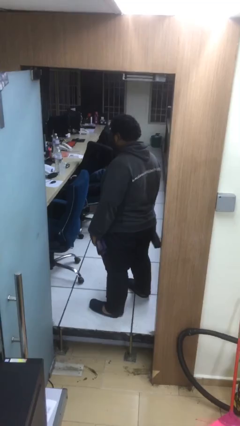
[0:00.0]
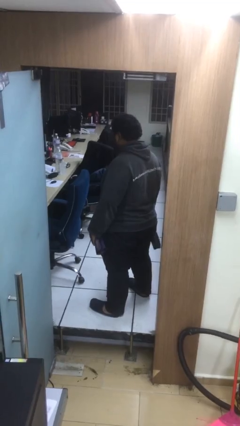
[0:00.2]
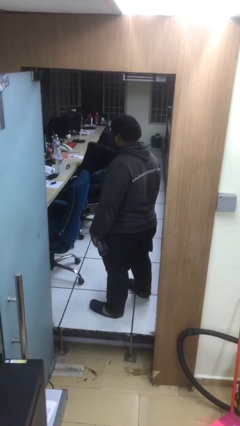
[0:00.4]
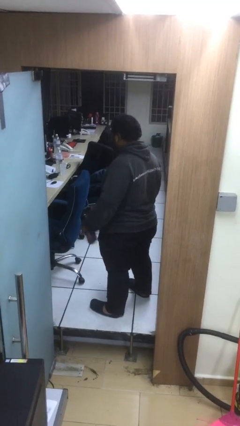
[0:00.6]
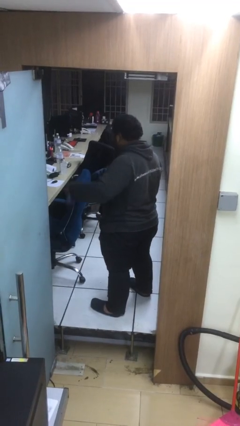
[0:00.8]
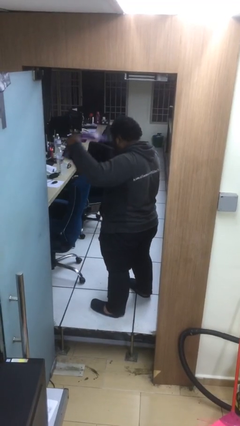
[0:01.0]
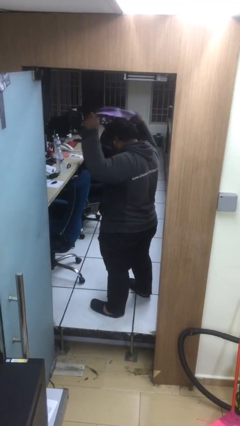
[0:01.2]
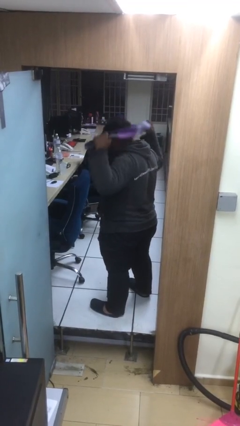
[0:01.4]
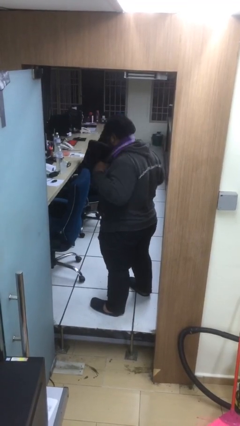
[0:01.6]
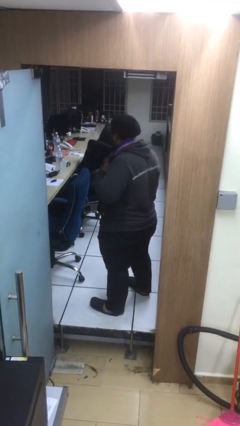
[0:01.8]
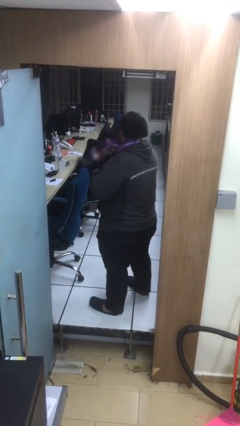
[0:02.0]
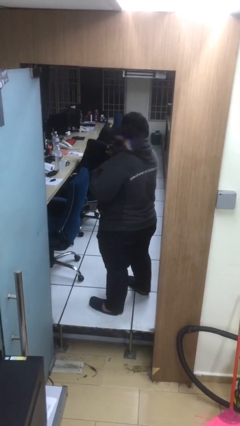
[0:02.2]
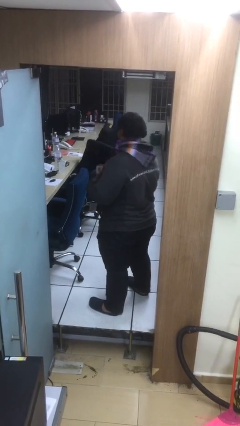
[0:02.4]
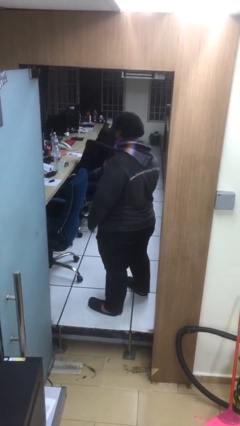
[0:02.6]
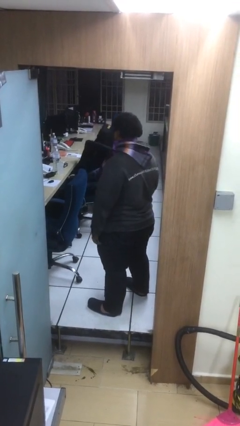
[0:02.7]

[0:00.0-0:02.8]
person puts on scarf

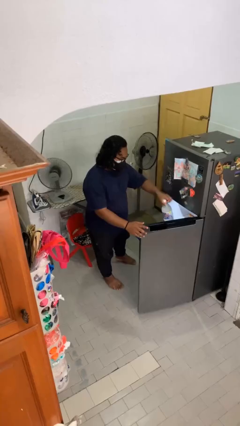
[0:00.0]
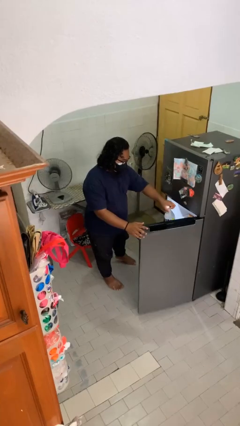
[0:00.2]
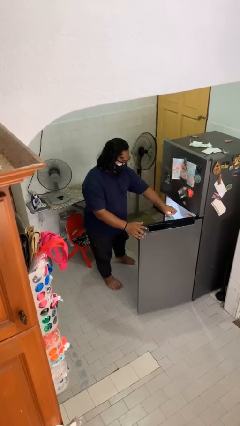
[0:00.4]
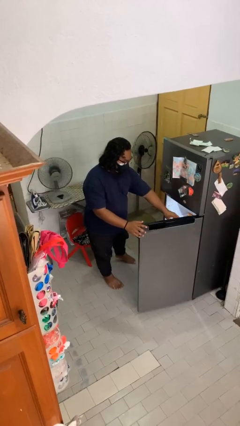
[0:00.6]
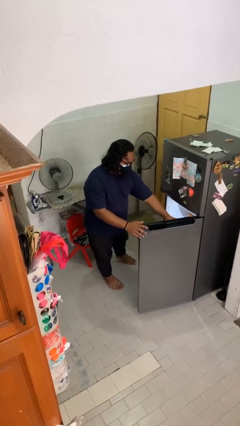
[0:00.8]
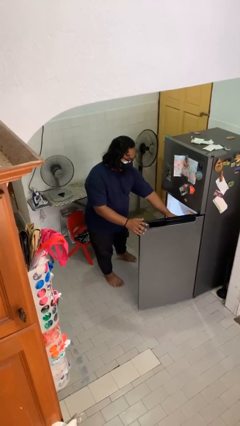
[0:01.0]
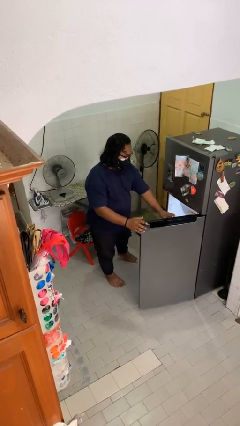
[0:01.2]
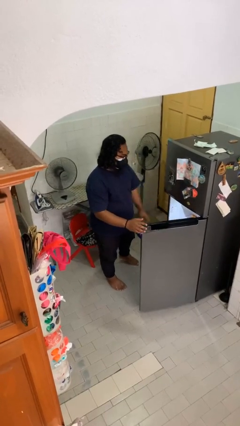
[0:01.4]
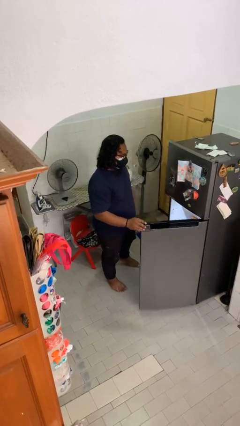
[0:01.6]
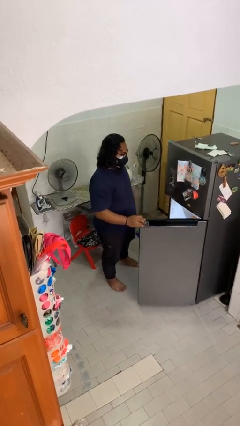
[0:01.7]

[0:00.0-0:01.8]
person puts object into refrigerator

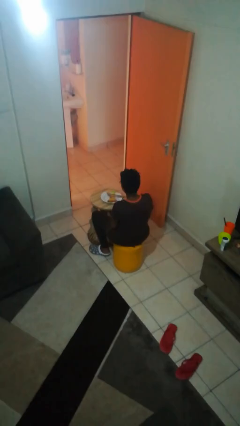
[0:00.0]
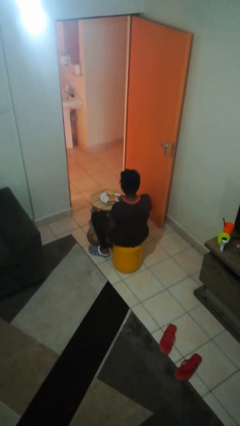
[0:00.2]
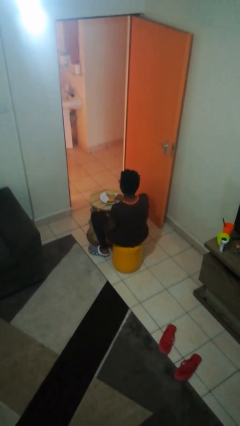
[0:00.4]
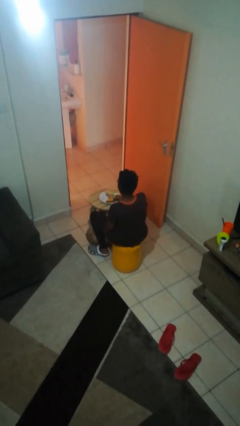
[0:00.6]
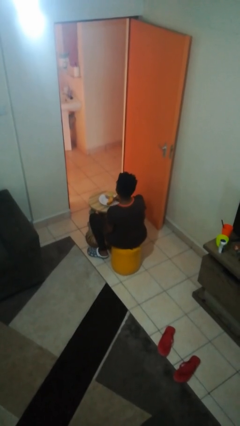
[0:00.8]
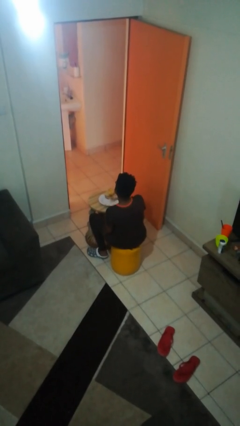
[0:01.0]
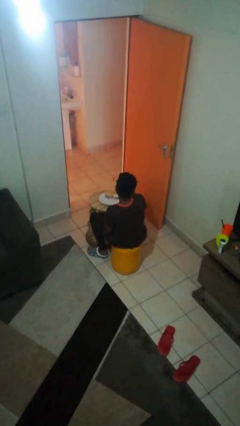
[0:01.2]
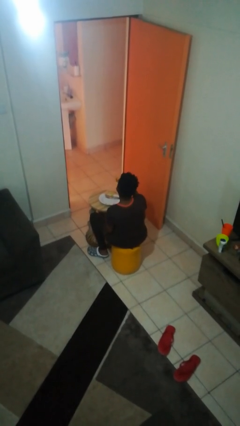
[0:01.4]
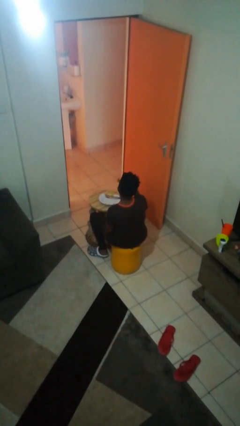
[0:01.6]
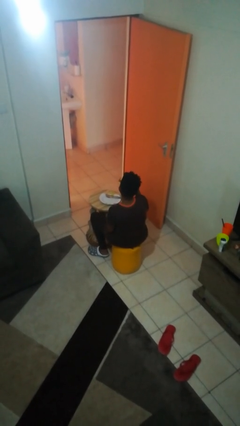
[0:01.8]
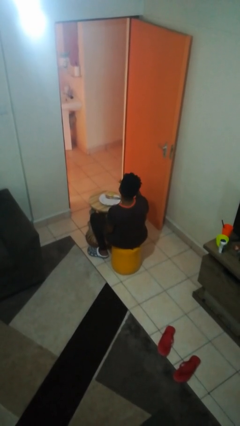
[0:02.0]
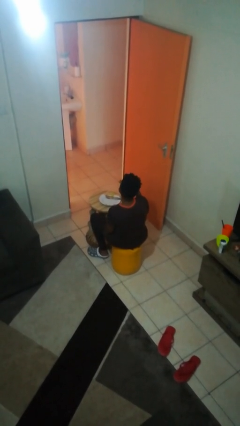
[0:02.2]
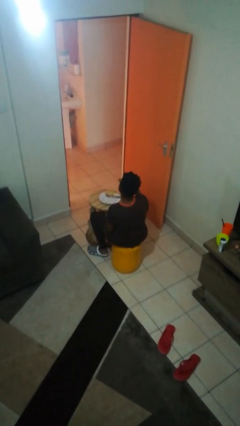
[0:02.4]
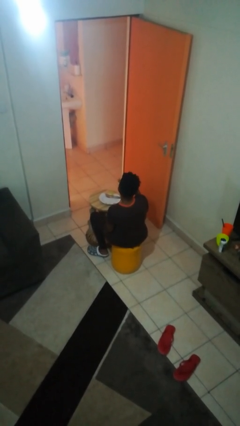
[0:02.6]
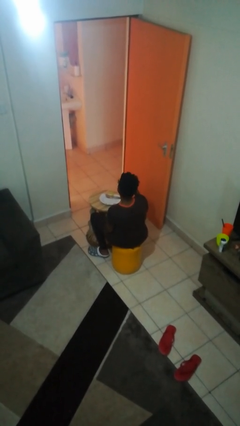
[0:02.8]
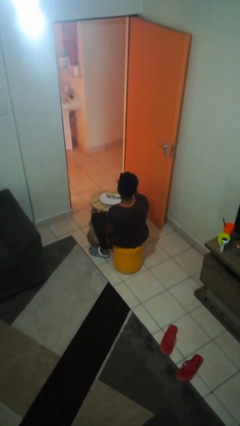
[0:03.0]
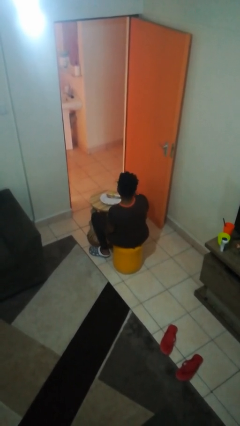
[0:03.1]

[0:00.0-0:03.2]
person eats with hands

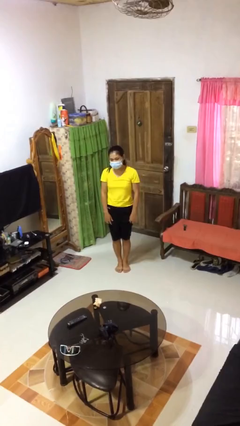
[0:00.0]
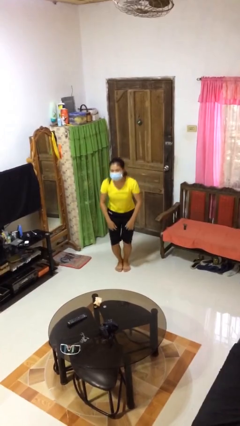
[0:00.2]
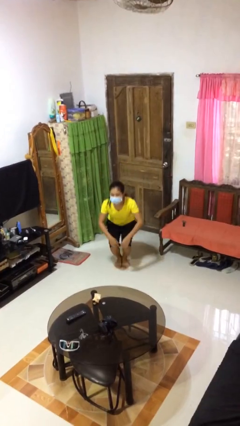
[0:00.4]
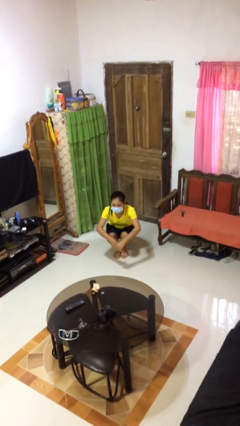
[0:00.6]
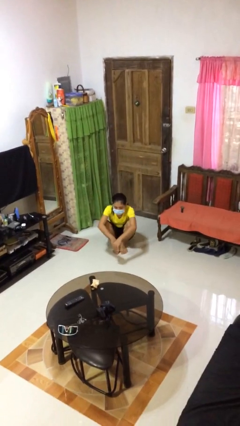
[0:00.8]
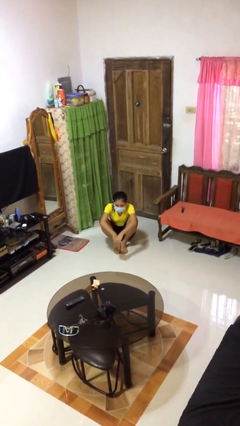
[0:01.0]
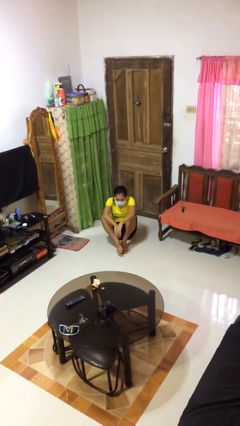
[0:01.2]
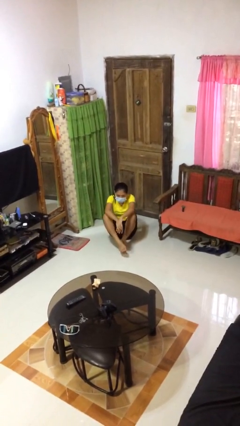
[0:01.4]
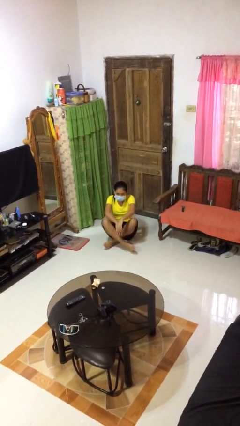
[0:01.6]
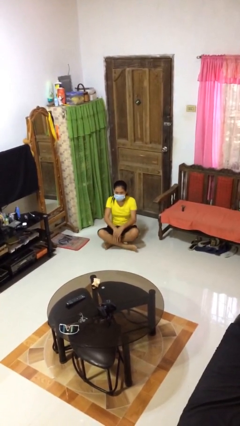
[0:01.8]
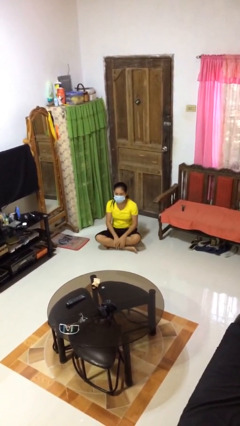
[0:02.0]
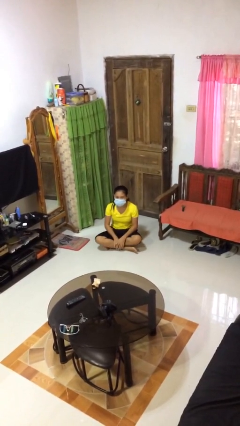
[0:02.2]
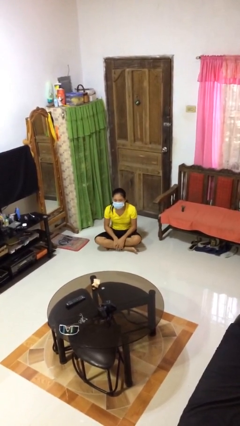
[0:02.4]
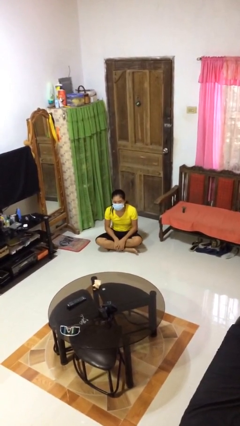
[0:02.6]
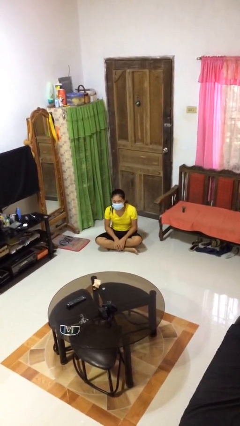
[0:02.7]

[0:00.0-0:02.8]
person sits crisscross

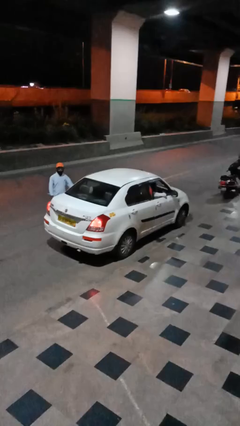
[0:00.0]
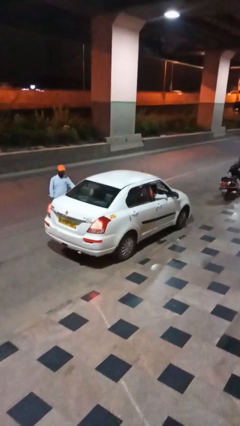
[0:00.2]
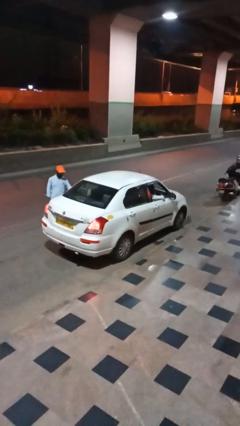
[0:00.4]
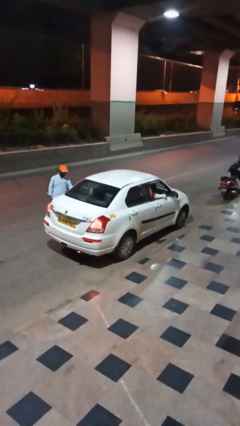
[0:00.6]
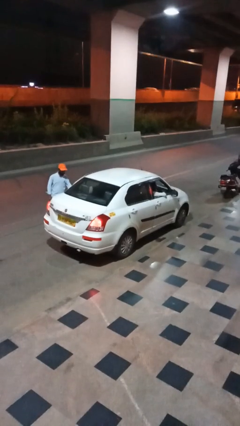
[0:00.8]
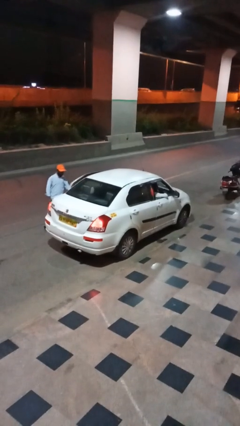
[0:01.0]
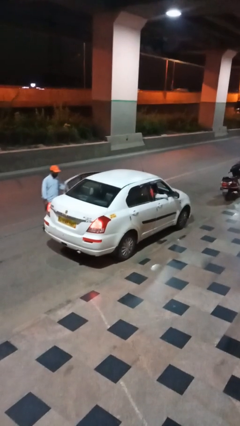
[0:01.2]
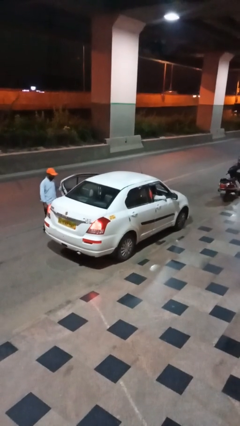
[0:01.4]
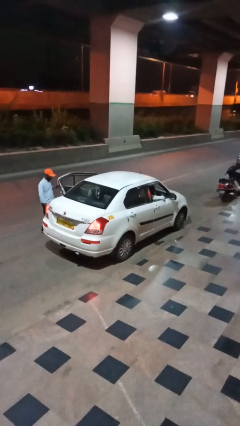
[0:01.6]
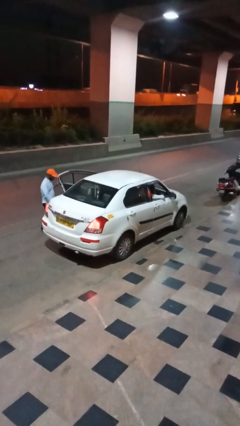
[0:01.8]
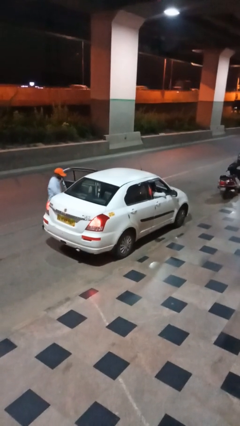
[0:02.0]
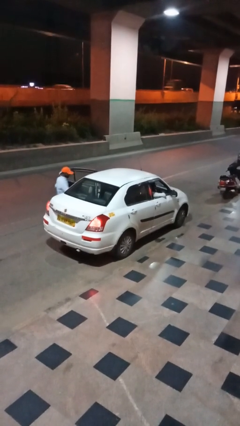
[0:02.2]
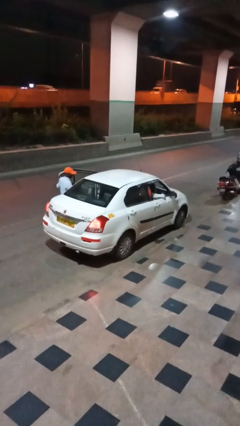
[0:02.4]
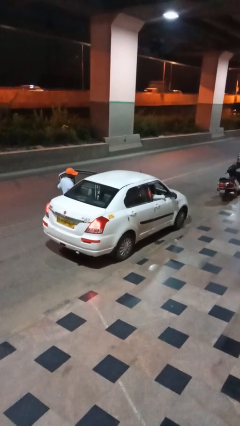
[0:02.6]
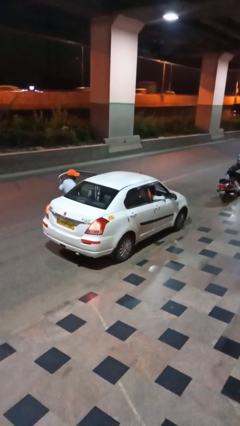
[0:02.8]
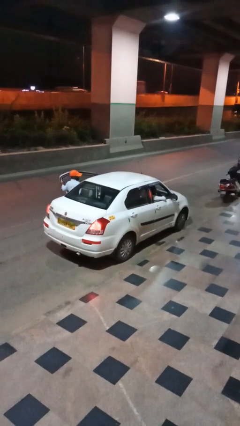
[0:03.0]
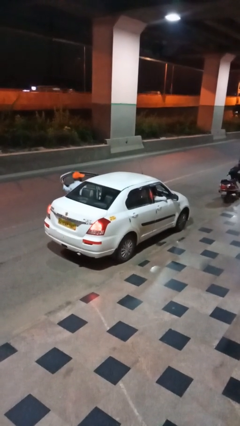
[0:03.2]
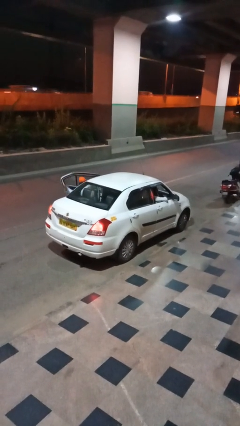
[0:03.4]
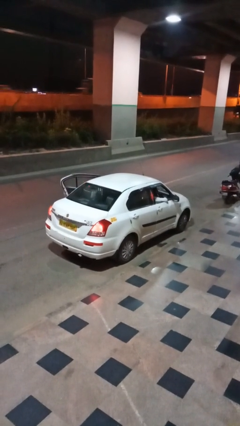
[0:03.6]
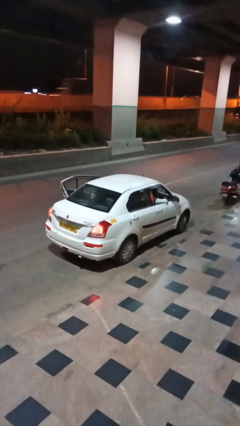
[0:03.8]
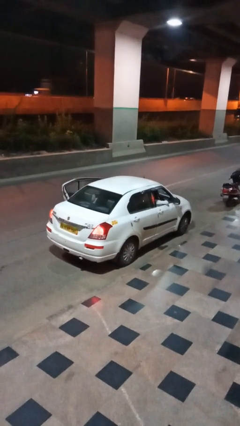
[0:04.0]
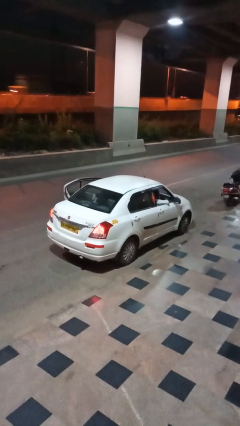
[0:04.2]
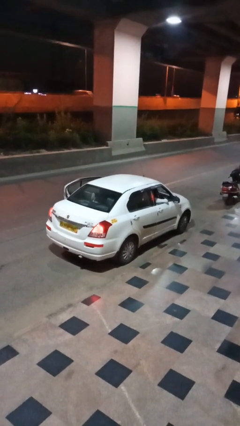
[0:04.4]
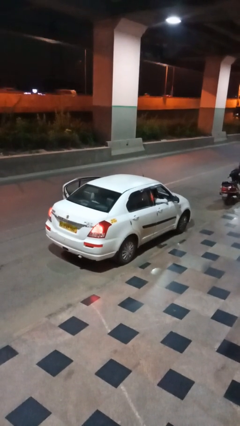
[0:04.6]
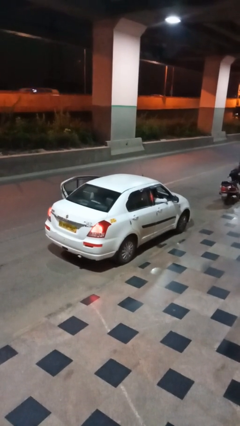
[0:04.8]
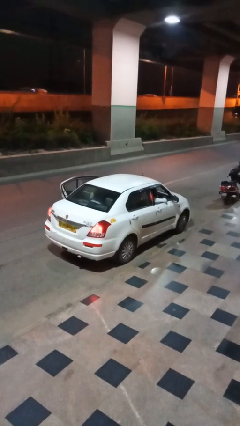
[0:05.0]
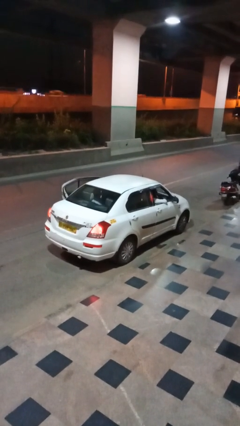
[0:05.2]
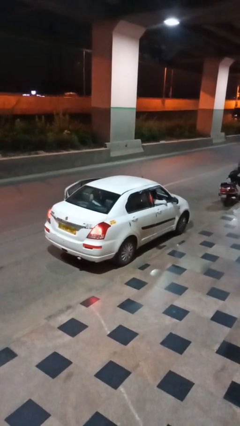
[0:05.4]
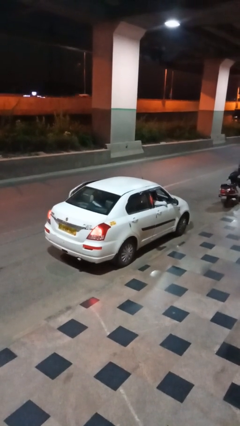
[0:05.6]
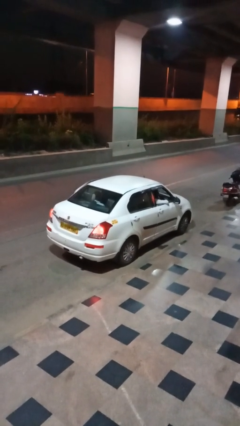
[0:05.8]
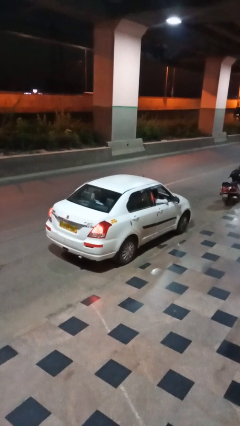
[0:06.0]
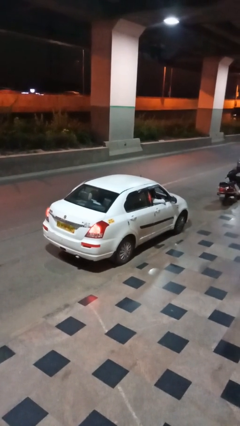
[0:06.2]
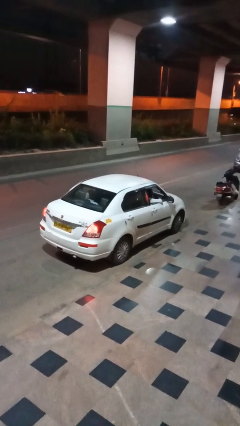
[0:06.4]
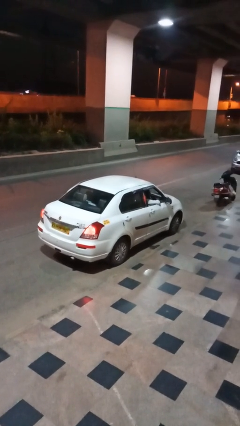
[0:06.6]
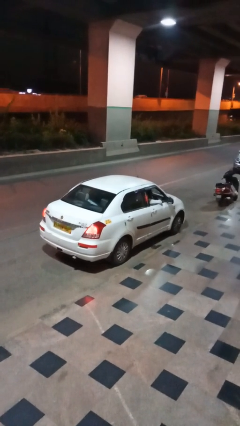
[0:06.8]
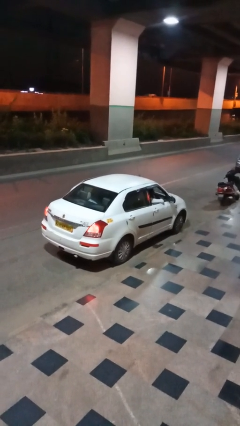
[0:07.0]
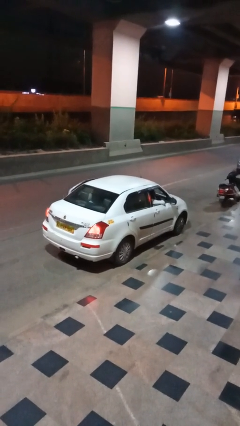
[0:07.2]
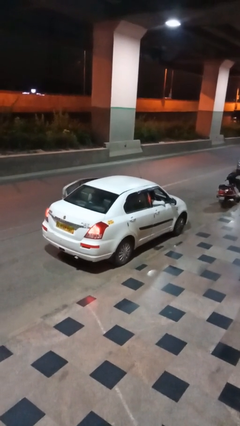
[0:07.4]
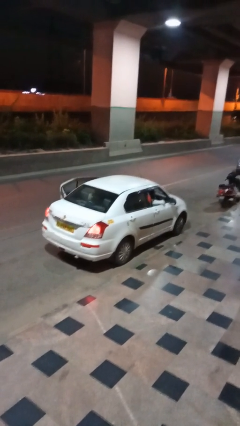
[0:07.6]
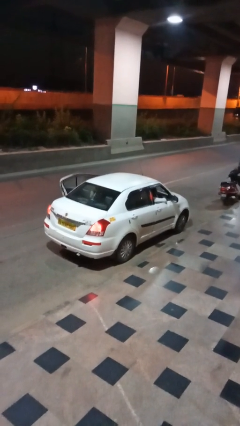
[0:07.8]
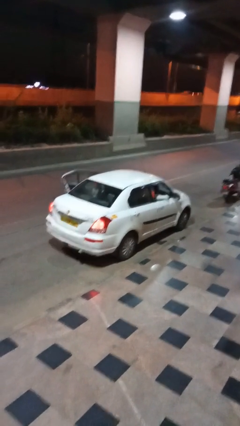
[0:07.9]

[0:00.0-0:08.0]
car picks up person
